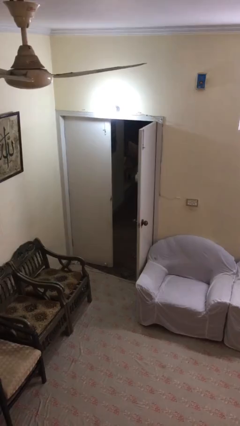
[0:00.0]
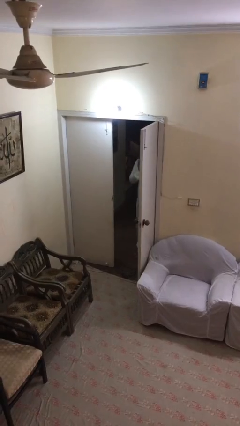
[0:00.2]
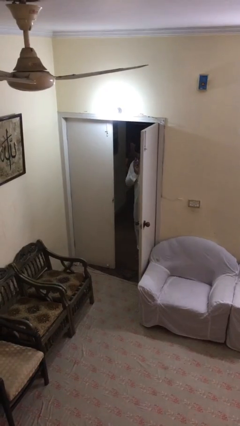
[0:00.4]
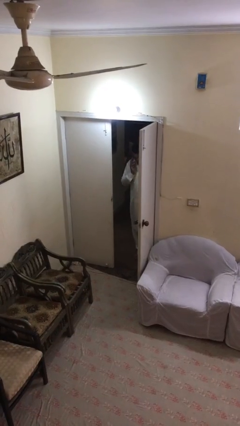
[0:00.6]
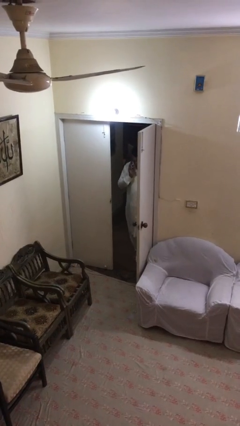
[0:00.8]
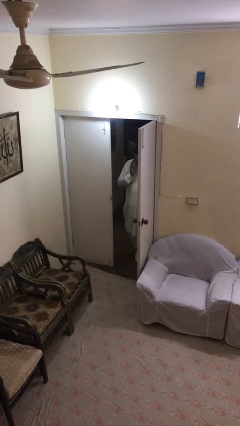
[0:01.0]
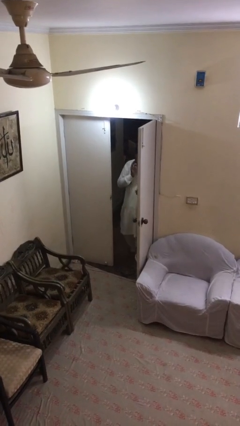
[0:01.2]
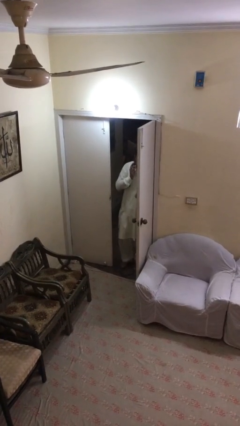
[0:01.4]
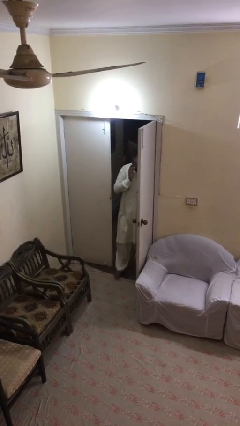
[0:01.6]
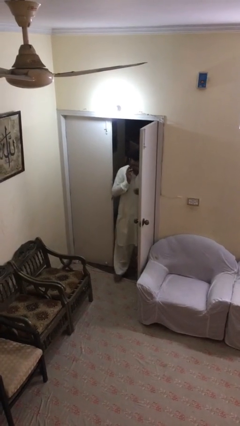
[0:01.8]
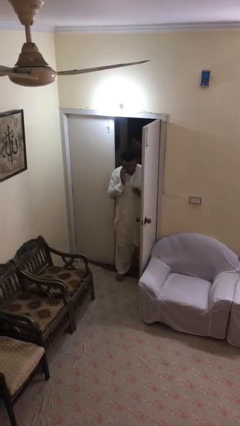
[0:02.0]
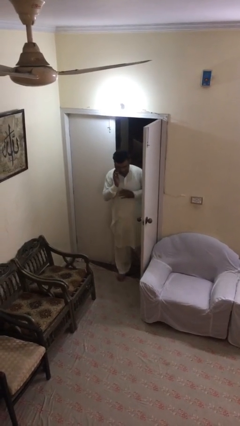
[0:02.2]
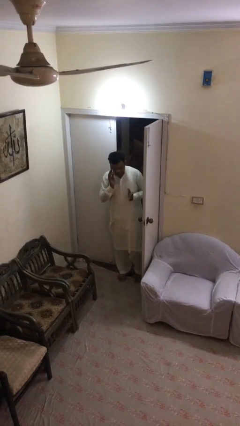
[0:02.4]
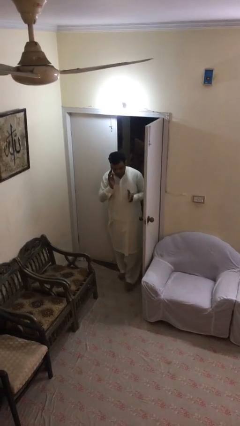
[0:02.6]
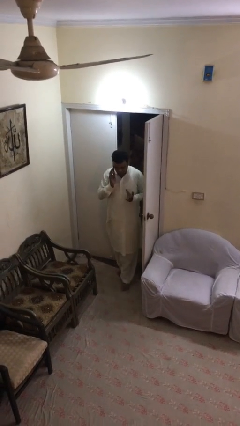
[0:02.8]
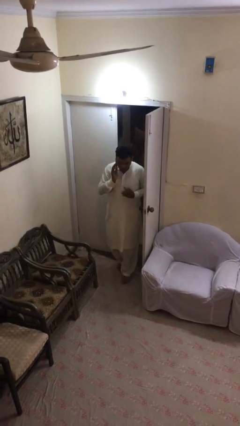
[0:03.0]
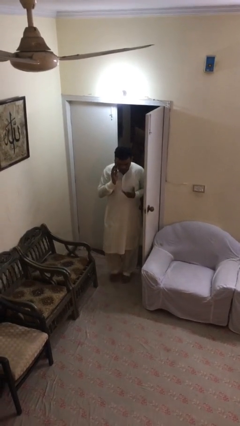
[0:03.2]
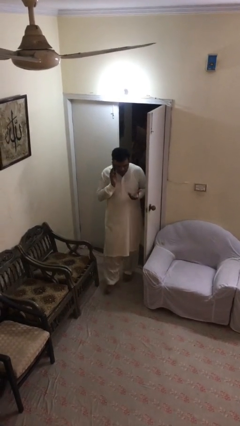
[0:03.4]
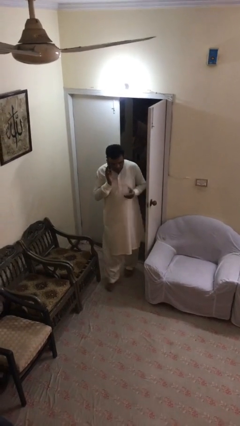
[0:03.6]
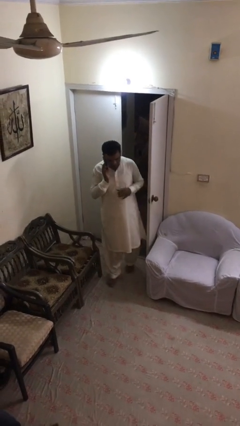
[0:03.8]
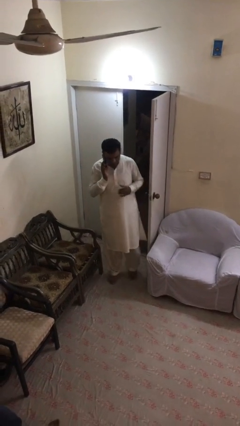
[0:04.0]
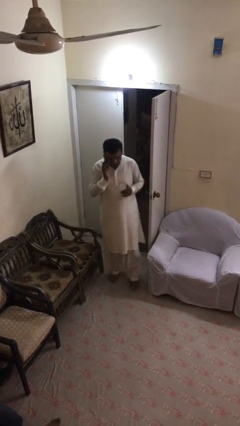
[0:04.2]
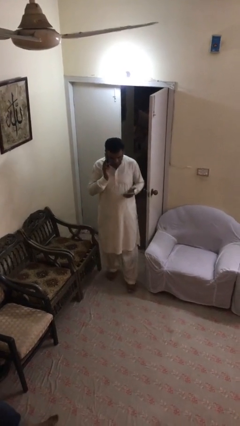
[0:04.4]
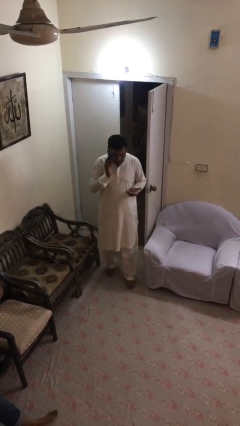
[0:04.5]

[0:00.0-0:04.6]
person enters scene through structure

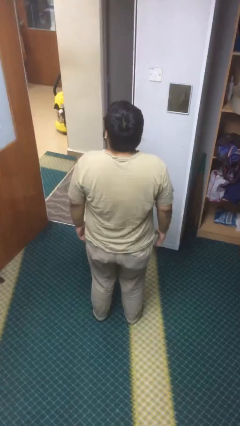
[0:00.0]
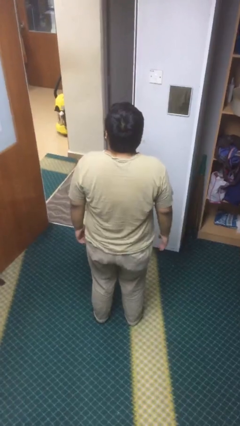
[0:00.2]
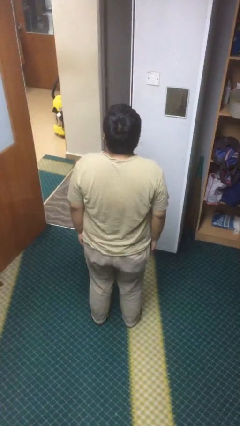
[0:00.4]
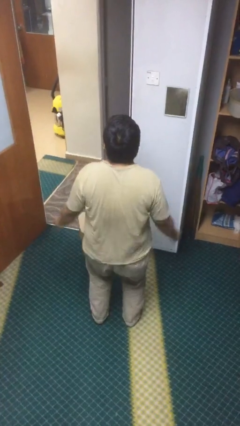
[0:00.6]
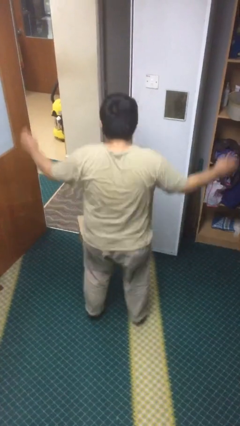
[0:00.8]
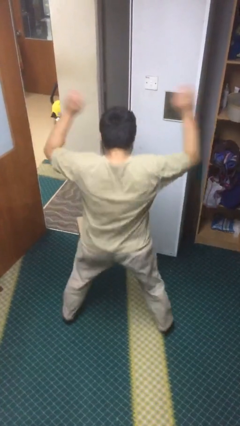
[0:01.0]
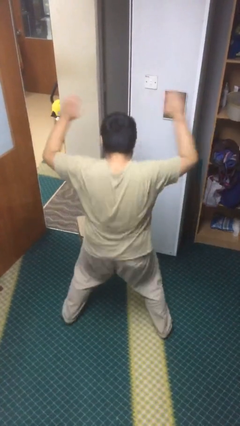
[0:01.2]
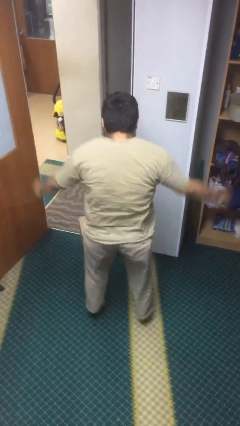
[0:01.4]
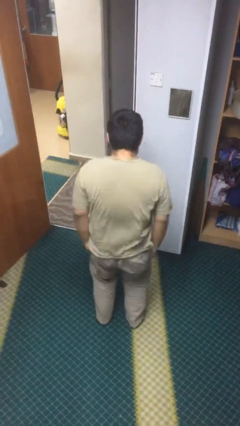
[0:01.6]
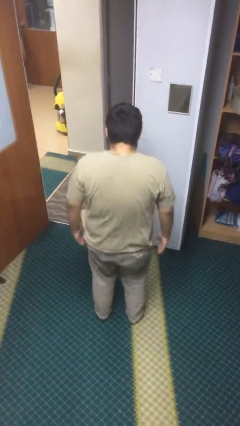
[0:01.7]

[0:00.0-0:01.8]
person exercises with jumping jacks

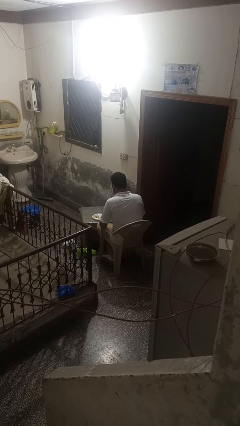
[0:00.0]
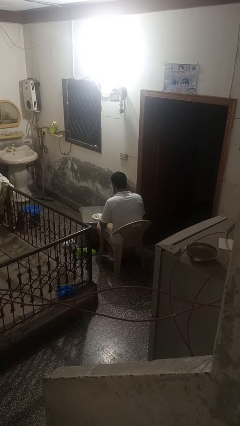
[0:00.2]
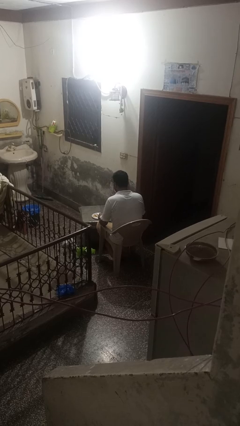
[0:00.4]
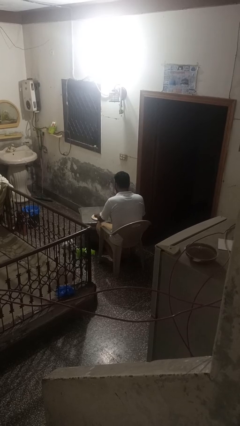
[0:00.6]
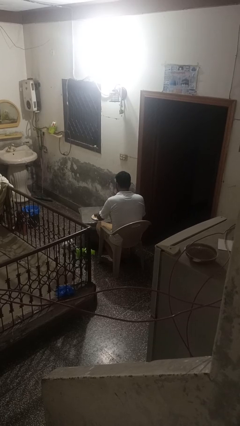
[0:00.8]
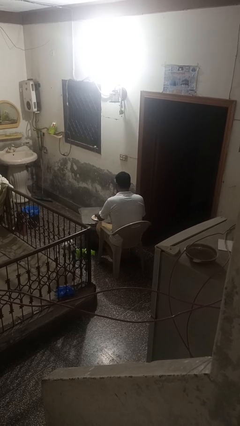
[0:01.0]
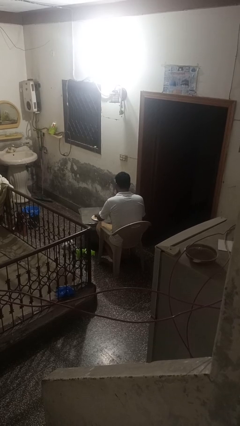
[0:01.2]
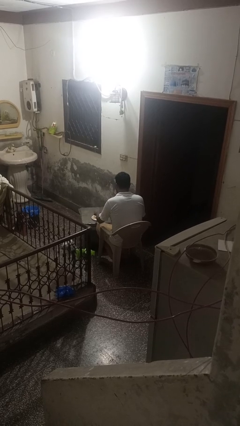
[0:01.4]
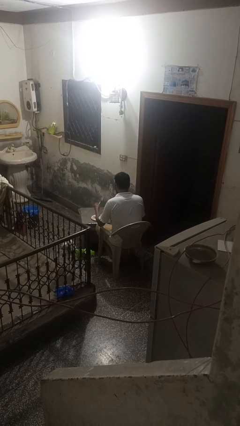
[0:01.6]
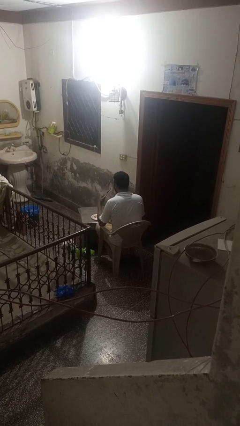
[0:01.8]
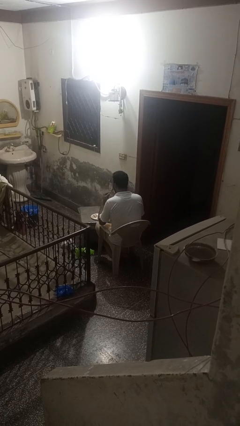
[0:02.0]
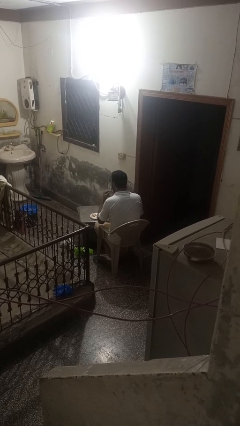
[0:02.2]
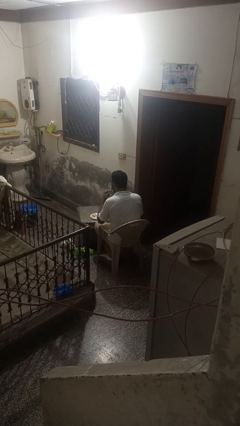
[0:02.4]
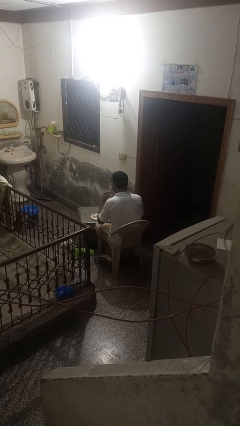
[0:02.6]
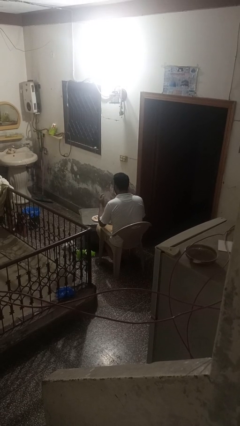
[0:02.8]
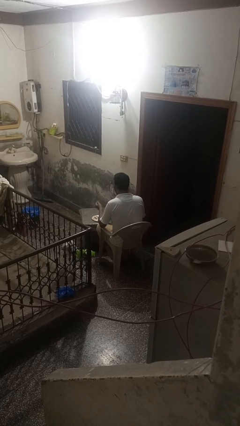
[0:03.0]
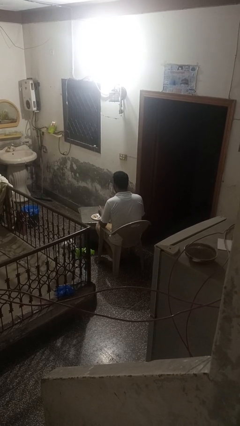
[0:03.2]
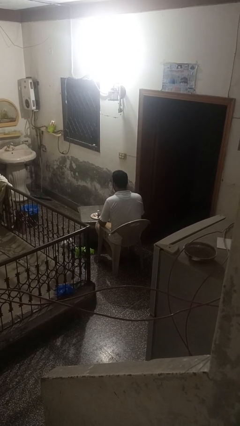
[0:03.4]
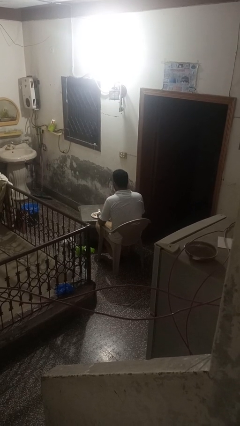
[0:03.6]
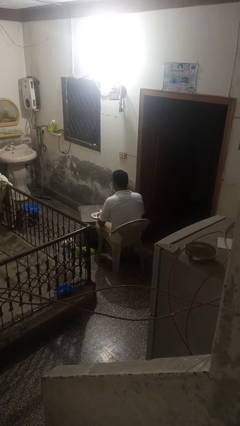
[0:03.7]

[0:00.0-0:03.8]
person eats with utensil

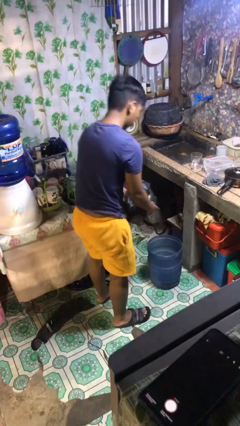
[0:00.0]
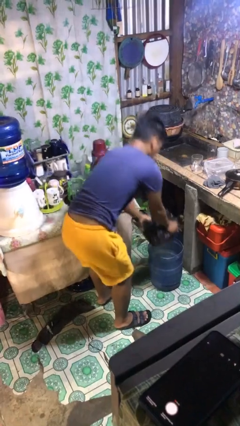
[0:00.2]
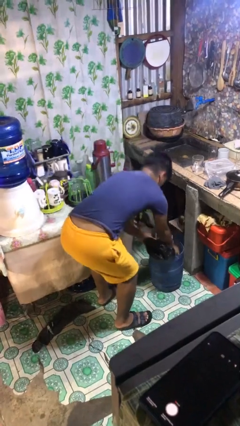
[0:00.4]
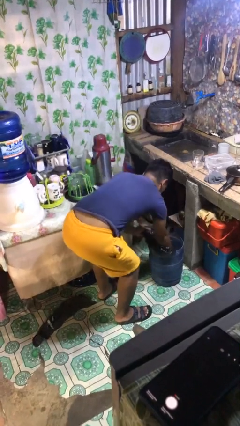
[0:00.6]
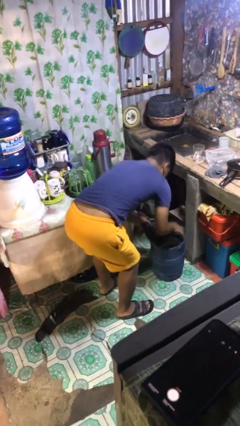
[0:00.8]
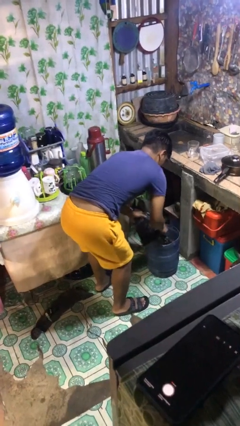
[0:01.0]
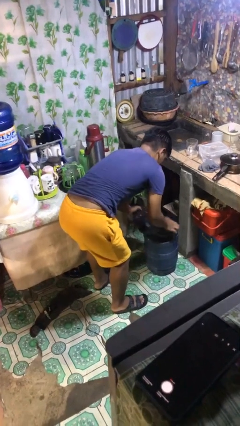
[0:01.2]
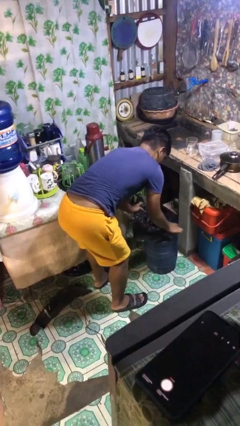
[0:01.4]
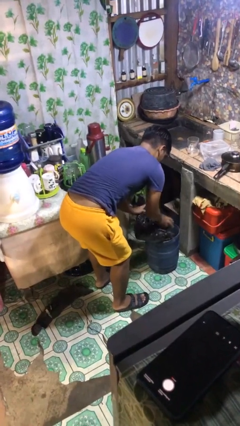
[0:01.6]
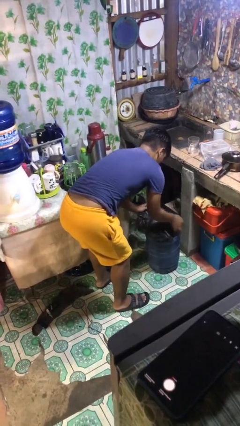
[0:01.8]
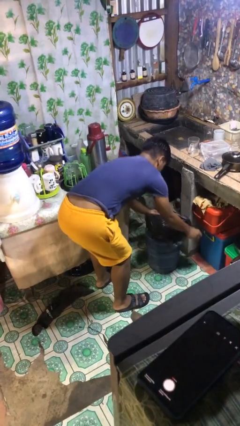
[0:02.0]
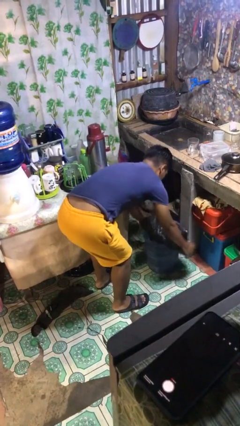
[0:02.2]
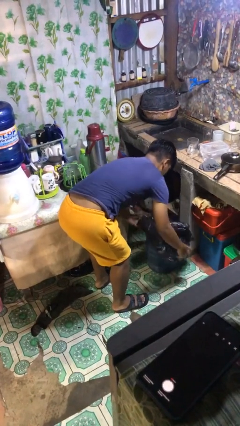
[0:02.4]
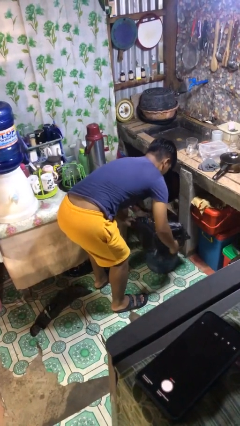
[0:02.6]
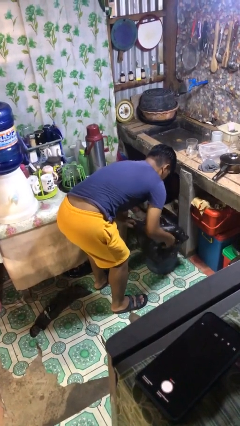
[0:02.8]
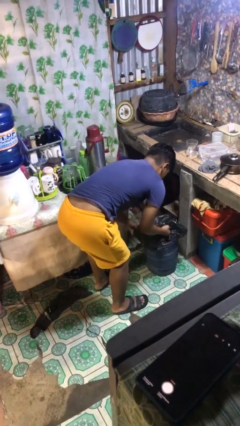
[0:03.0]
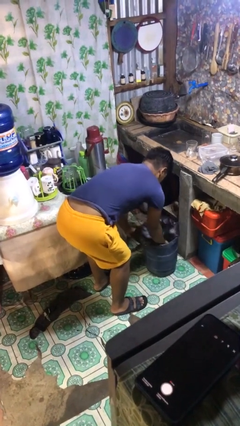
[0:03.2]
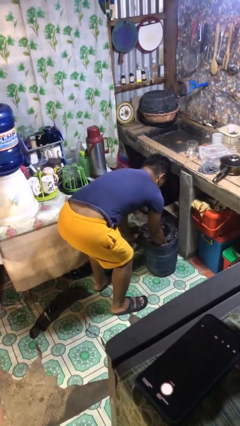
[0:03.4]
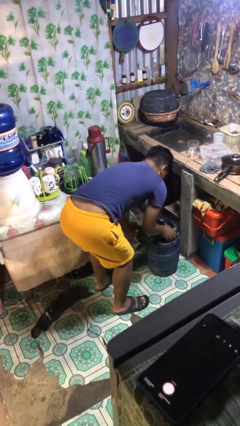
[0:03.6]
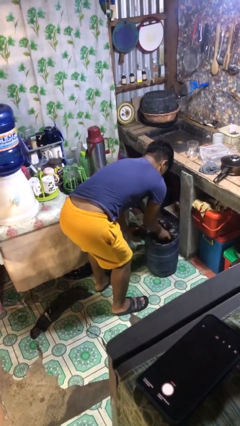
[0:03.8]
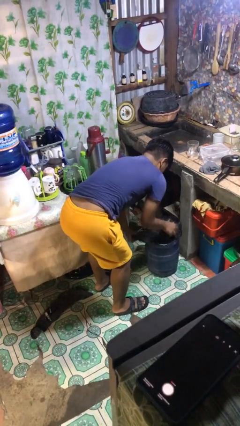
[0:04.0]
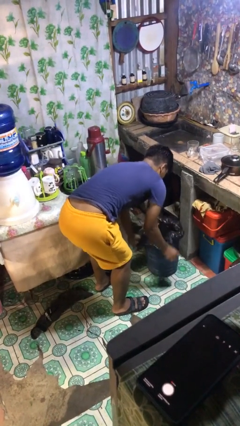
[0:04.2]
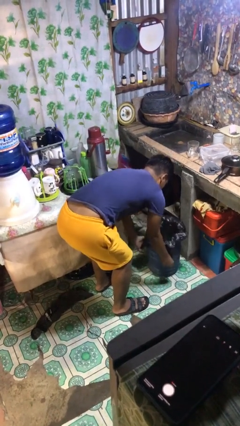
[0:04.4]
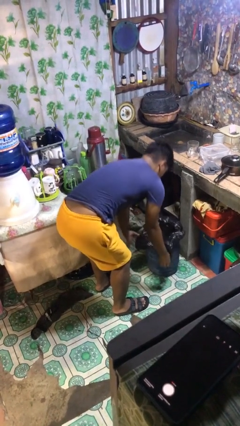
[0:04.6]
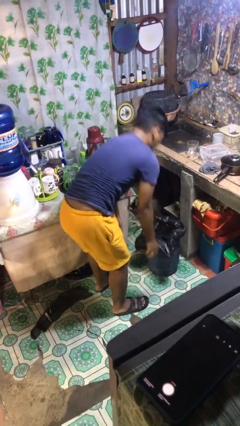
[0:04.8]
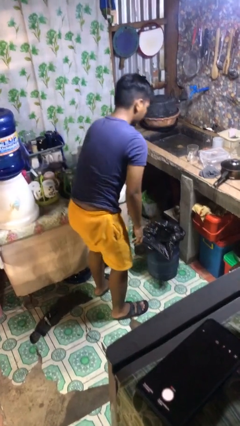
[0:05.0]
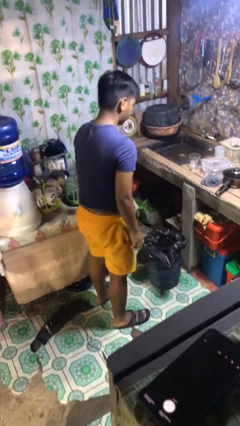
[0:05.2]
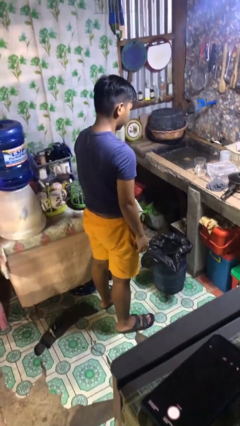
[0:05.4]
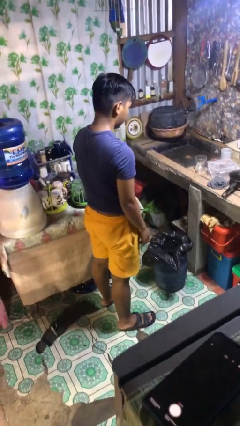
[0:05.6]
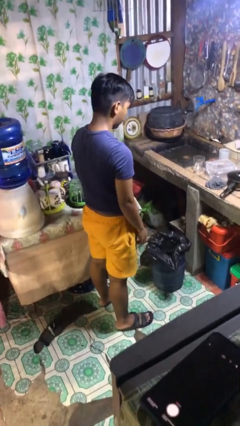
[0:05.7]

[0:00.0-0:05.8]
person inserts trashbag into trashcan

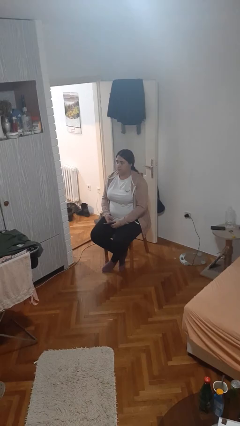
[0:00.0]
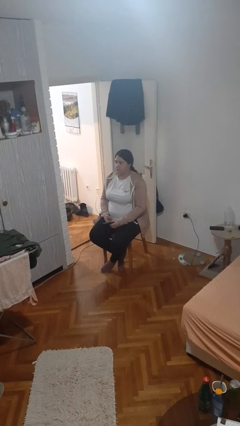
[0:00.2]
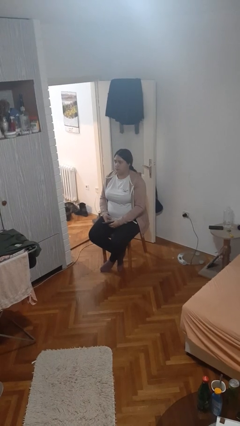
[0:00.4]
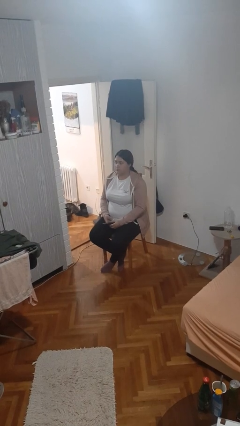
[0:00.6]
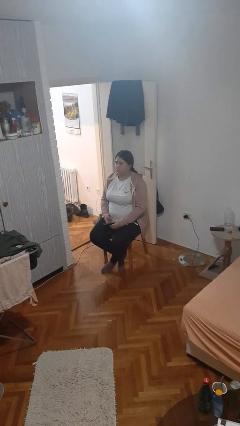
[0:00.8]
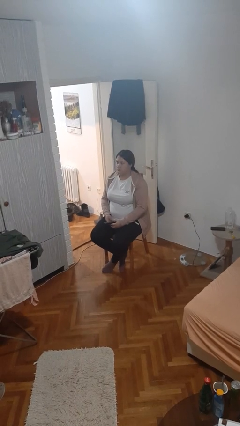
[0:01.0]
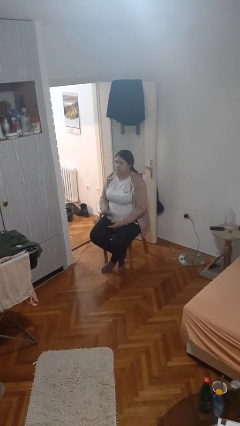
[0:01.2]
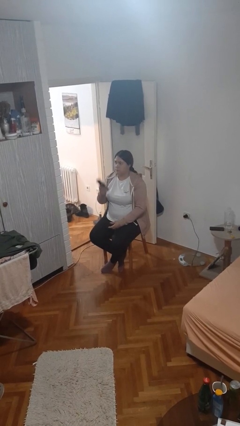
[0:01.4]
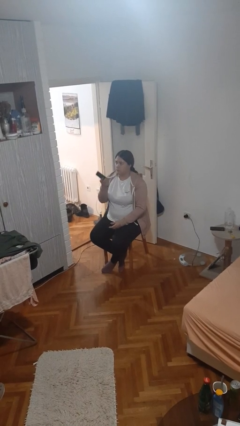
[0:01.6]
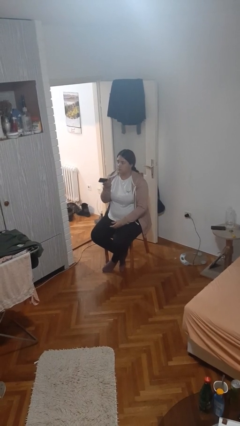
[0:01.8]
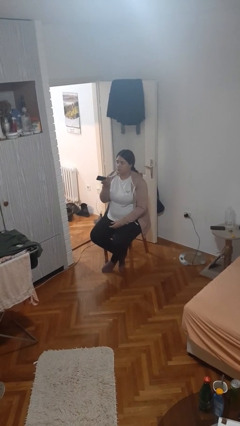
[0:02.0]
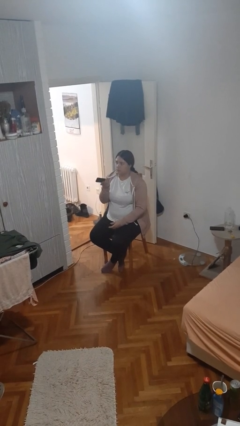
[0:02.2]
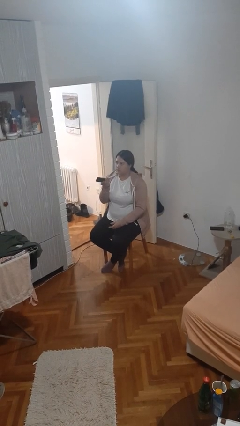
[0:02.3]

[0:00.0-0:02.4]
person uses television remote
